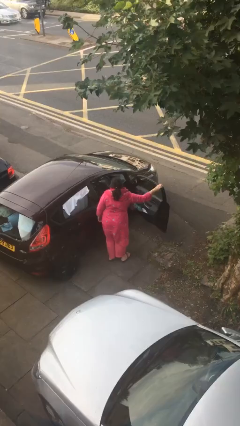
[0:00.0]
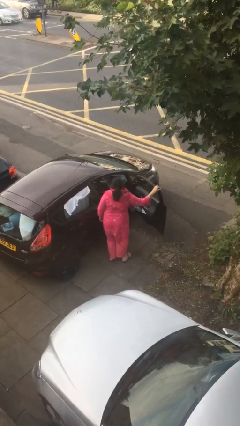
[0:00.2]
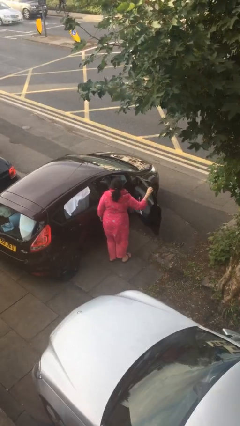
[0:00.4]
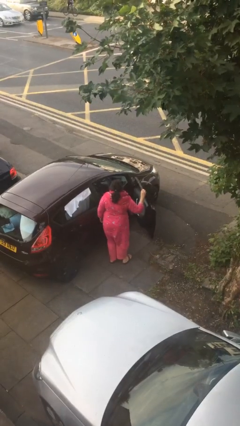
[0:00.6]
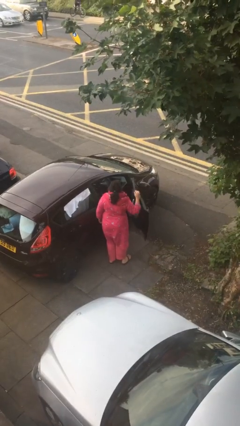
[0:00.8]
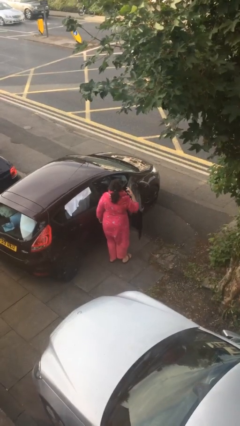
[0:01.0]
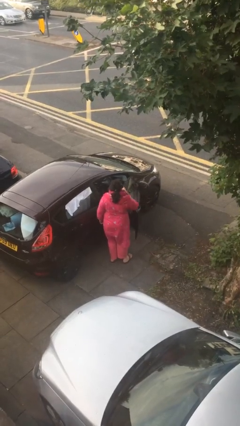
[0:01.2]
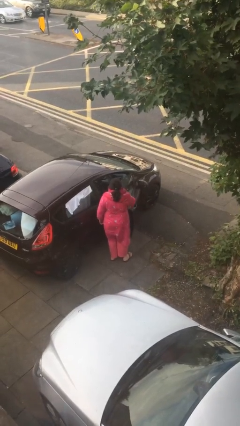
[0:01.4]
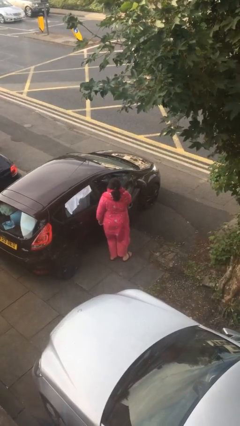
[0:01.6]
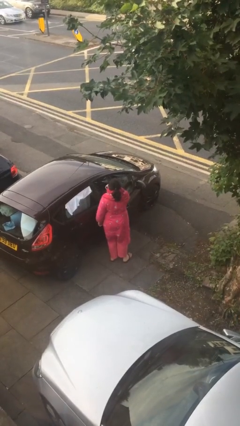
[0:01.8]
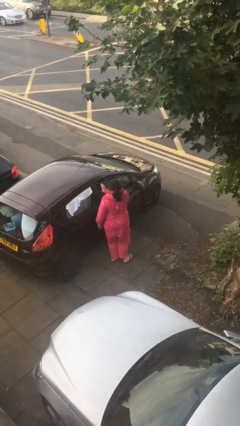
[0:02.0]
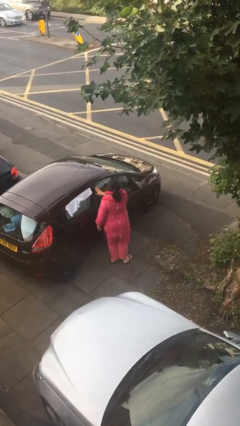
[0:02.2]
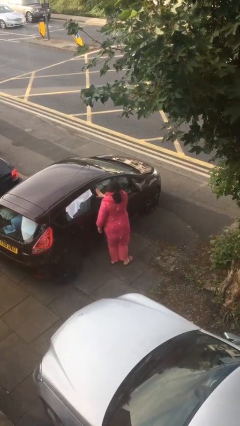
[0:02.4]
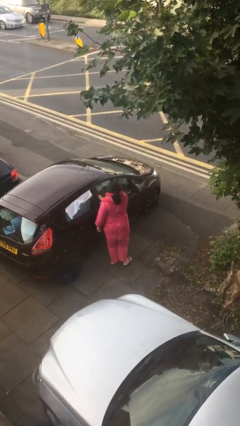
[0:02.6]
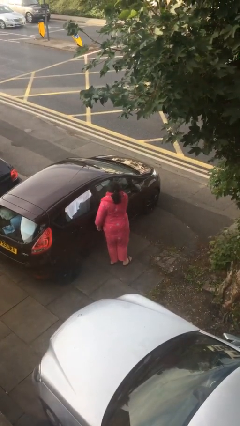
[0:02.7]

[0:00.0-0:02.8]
person closes car door

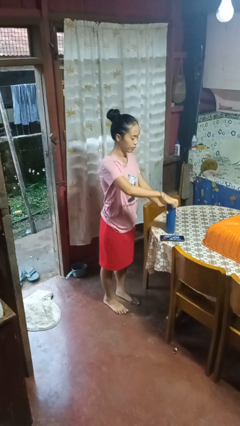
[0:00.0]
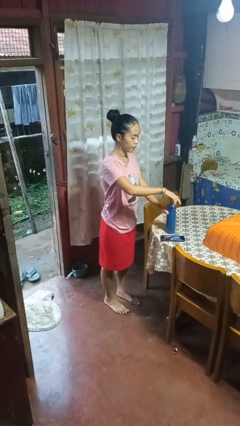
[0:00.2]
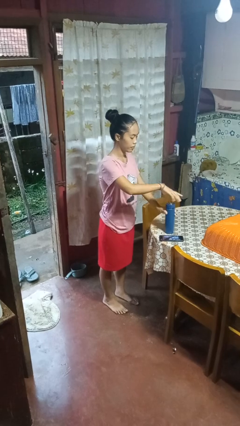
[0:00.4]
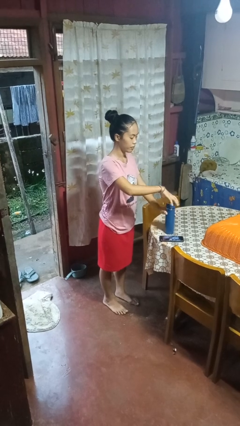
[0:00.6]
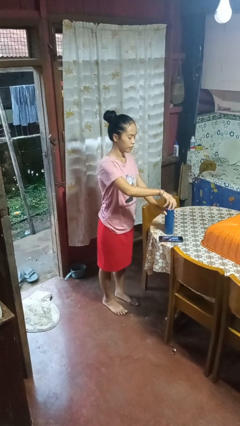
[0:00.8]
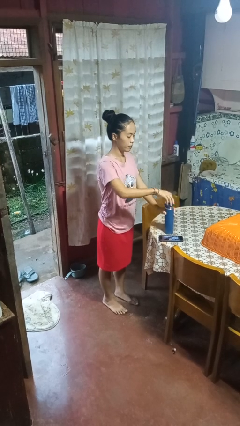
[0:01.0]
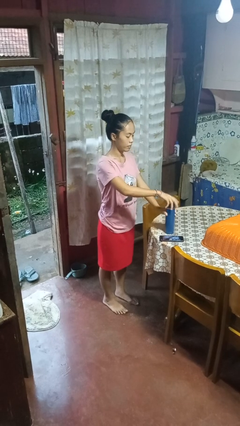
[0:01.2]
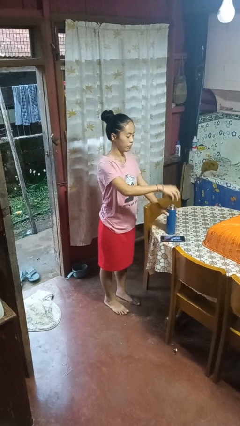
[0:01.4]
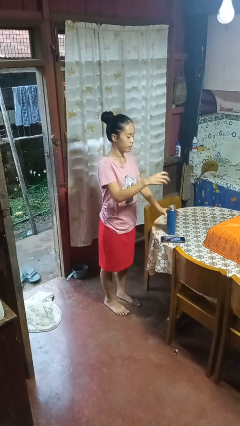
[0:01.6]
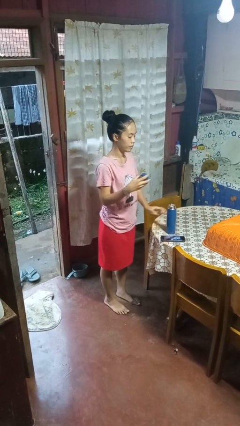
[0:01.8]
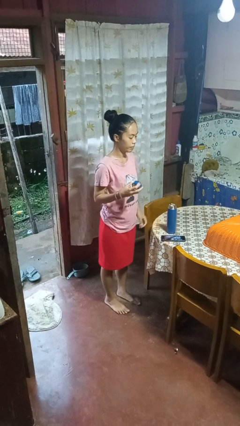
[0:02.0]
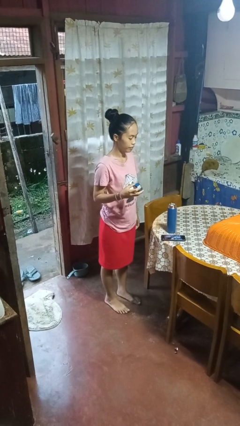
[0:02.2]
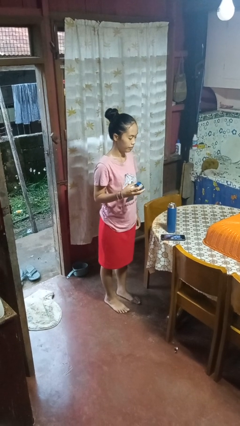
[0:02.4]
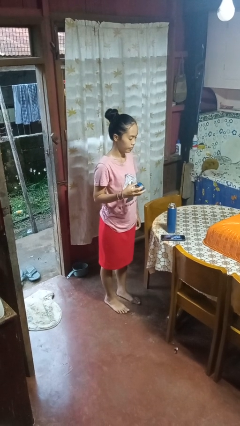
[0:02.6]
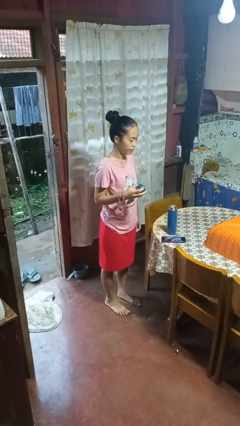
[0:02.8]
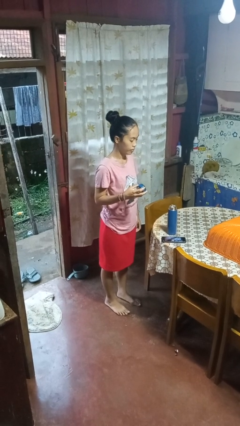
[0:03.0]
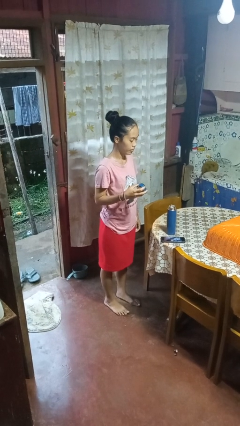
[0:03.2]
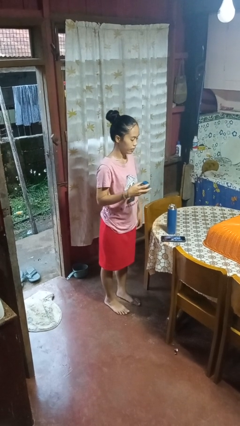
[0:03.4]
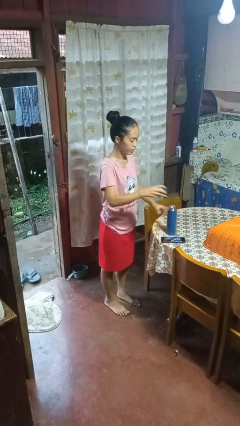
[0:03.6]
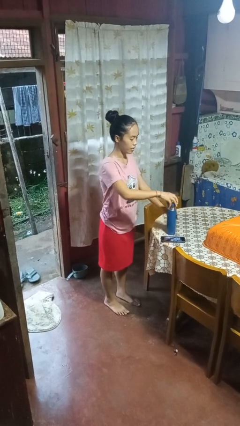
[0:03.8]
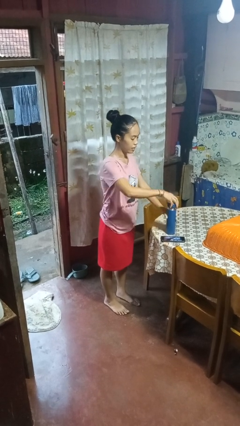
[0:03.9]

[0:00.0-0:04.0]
person opens jar

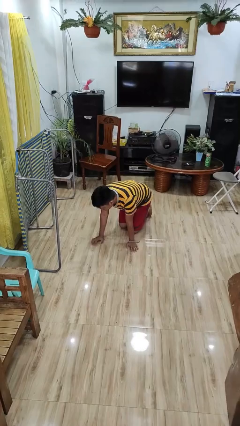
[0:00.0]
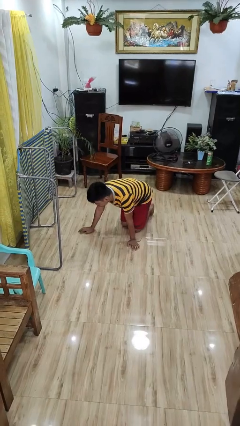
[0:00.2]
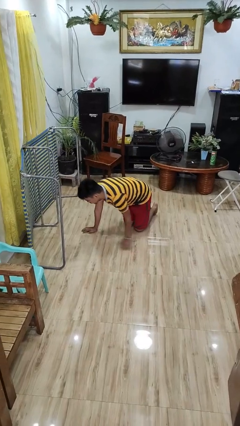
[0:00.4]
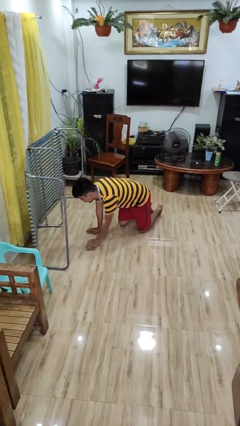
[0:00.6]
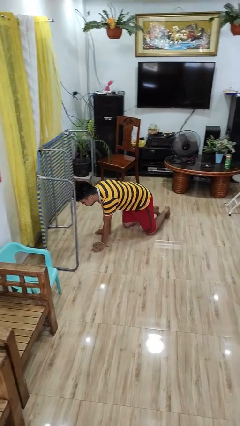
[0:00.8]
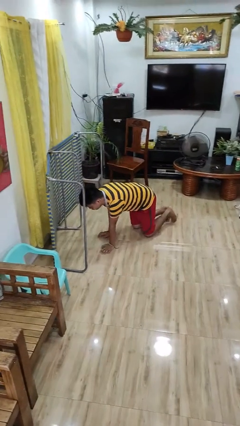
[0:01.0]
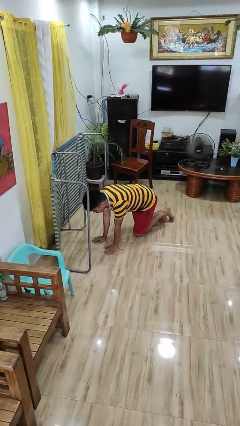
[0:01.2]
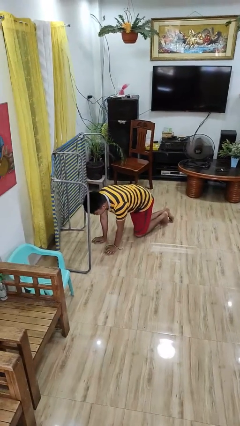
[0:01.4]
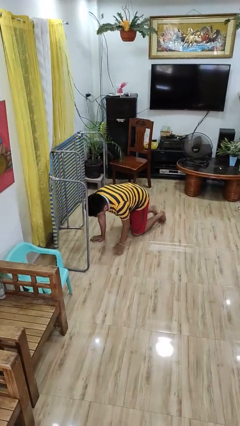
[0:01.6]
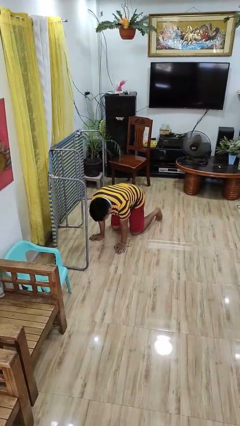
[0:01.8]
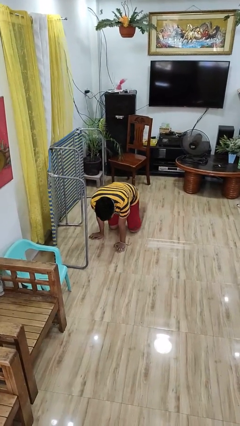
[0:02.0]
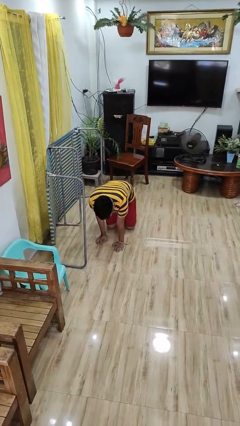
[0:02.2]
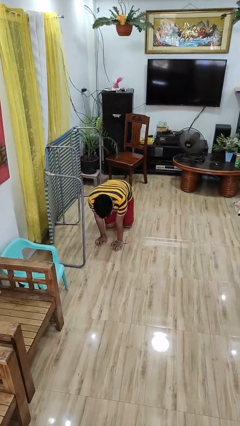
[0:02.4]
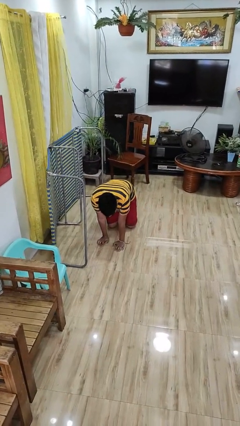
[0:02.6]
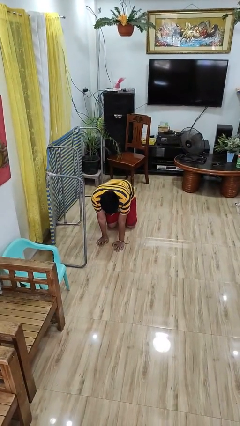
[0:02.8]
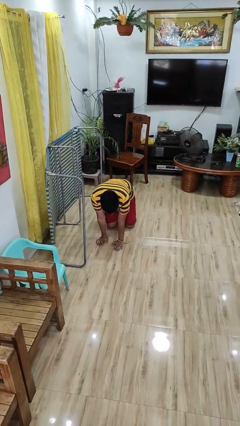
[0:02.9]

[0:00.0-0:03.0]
person crawls

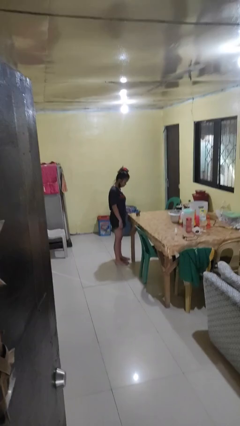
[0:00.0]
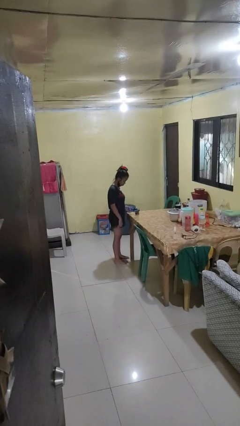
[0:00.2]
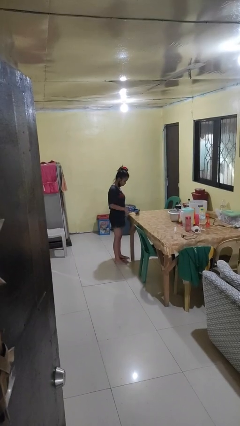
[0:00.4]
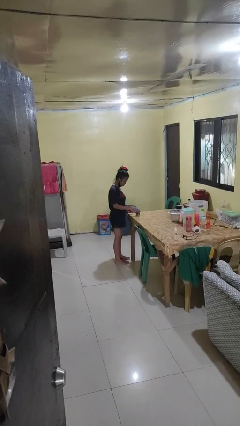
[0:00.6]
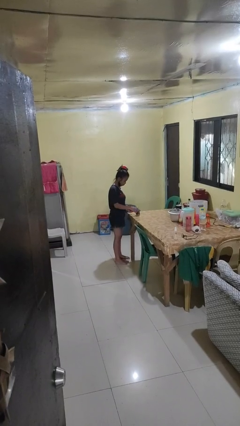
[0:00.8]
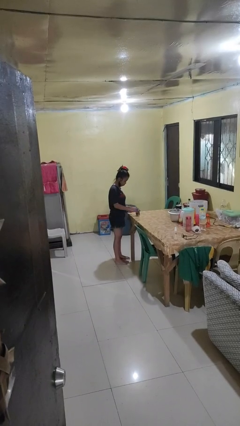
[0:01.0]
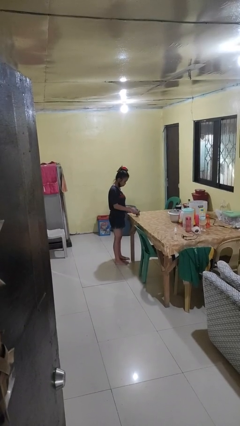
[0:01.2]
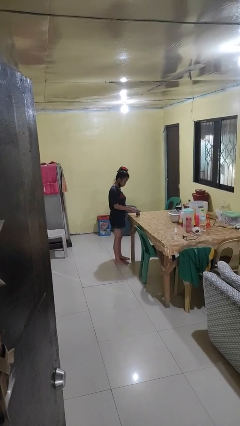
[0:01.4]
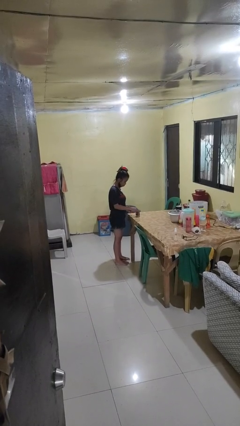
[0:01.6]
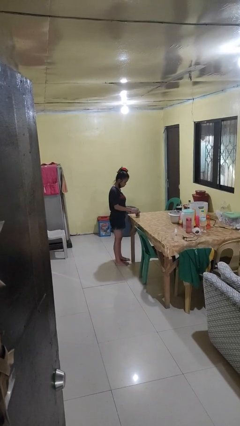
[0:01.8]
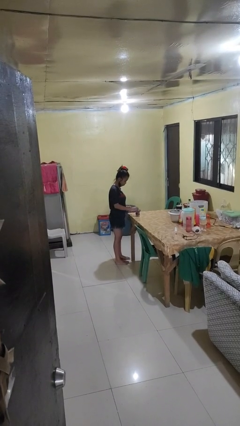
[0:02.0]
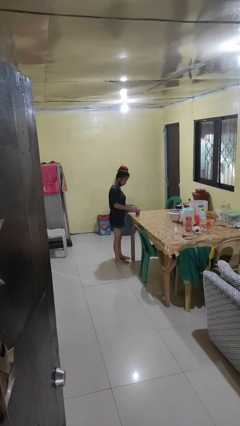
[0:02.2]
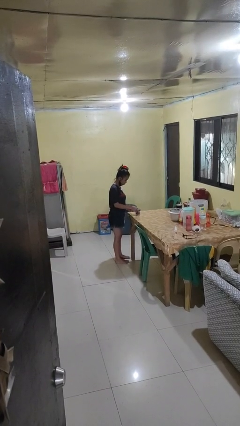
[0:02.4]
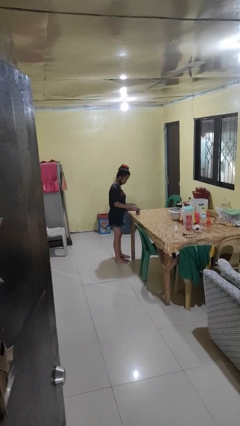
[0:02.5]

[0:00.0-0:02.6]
person opens can with can opener

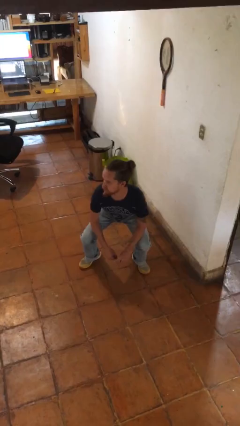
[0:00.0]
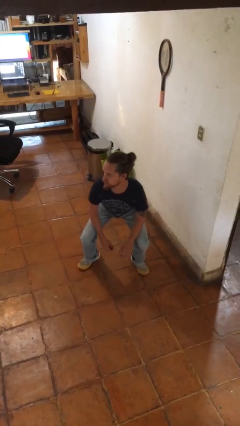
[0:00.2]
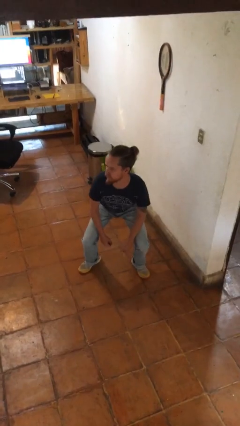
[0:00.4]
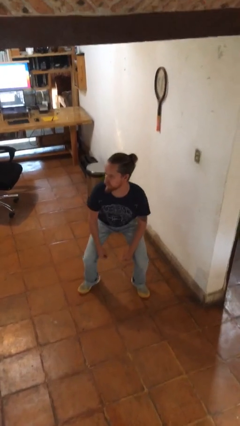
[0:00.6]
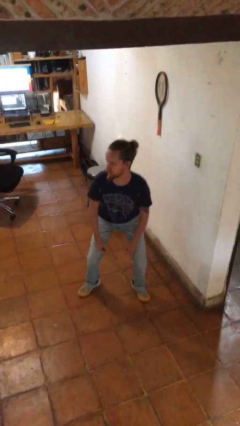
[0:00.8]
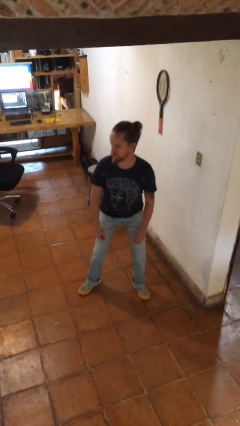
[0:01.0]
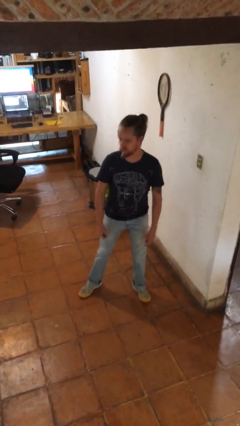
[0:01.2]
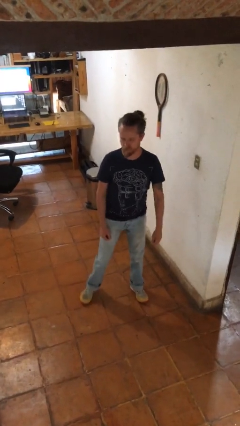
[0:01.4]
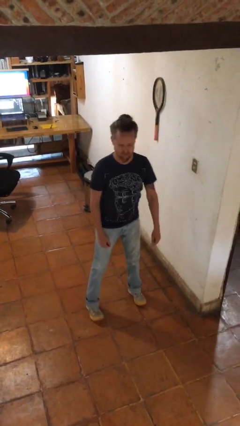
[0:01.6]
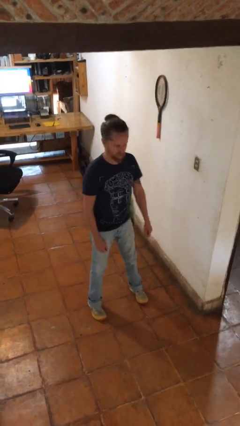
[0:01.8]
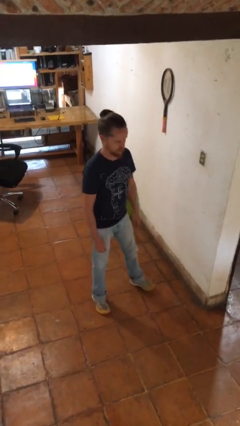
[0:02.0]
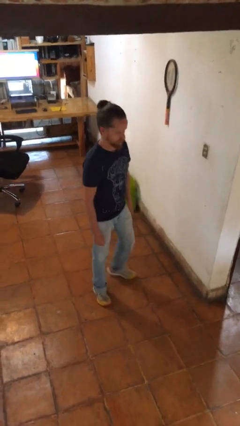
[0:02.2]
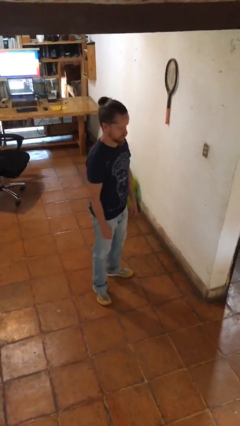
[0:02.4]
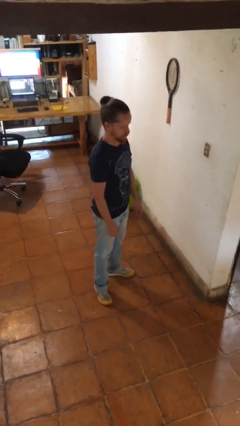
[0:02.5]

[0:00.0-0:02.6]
person stands up

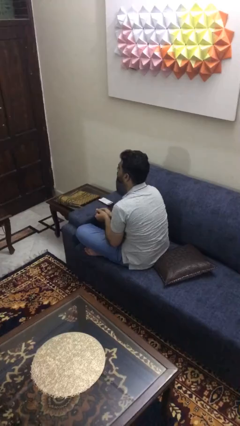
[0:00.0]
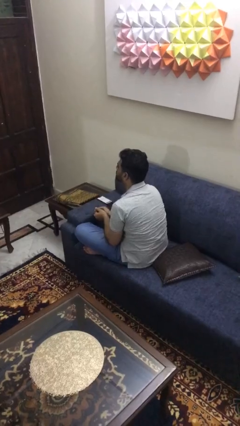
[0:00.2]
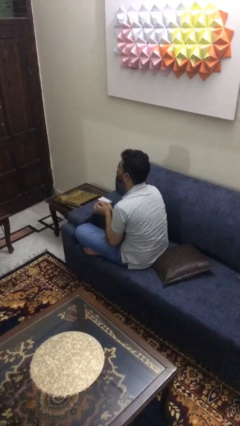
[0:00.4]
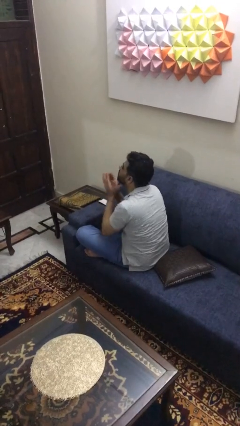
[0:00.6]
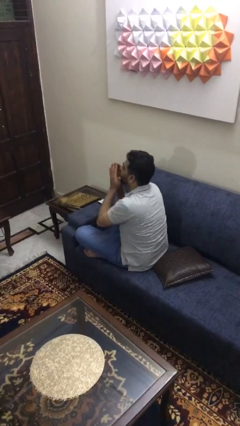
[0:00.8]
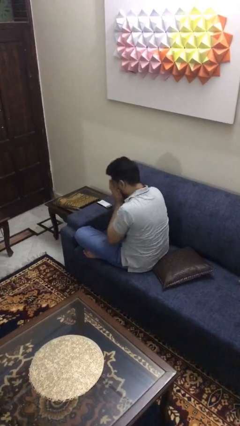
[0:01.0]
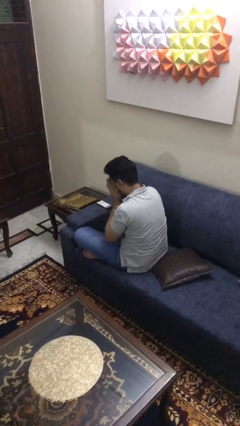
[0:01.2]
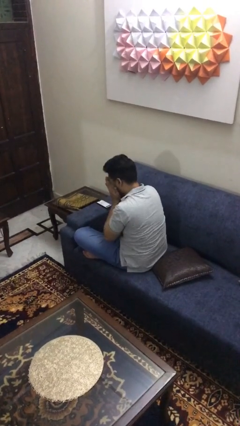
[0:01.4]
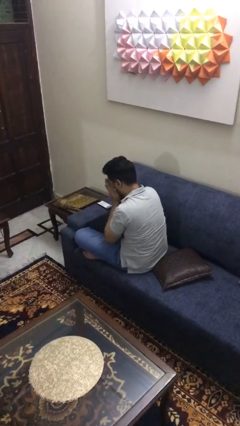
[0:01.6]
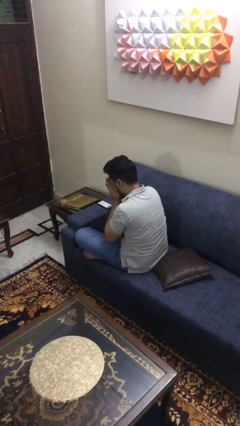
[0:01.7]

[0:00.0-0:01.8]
person sneezes into arm

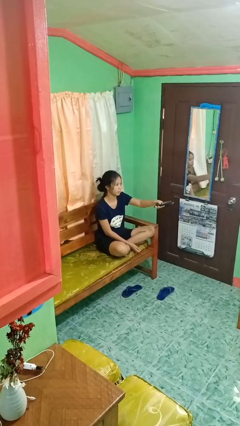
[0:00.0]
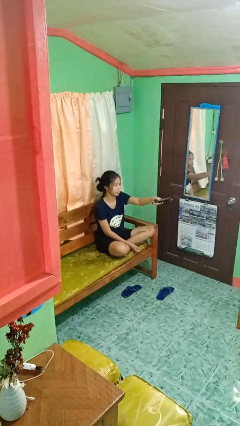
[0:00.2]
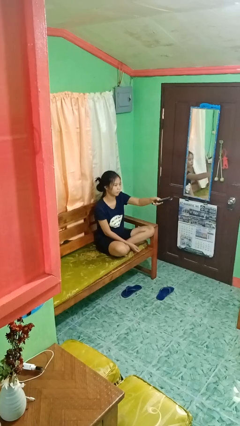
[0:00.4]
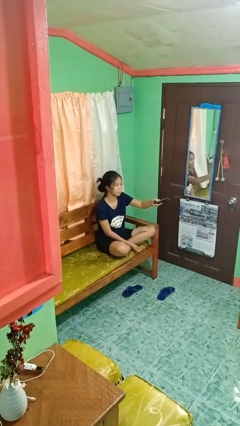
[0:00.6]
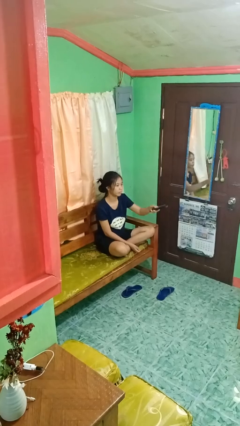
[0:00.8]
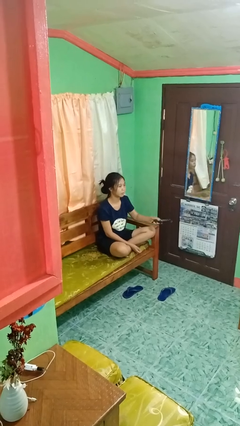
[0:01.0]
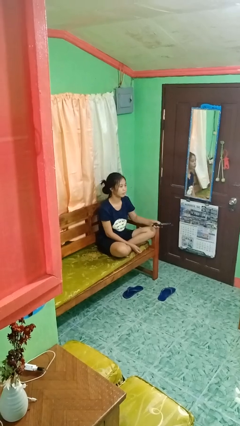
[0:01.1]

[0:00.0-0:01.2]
person uses television remote
